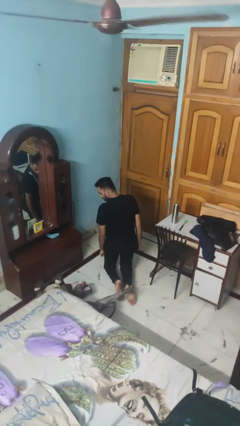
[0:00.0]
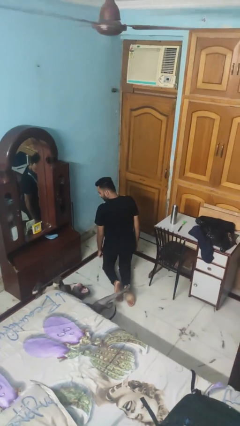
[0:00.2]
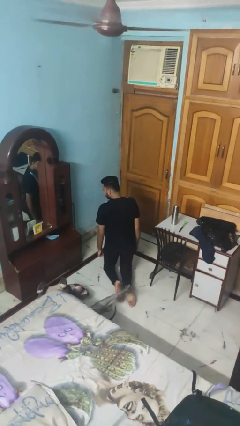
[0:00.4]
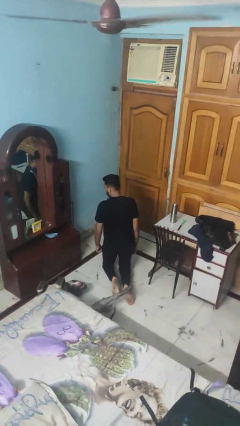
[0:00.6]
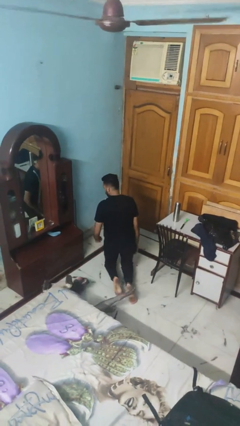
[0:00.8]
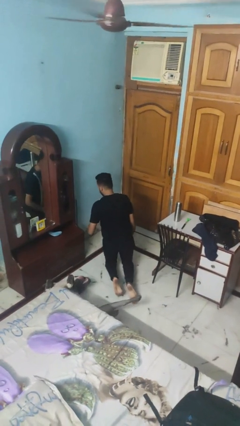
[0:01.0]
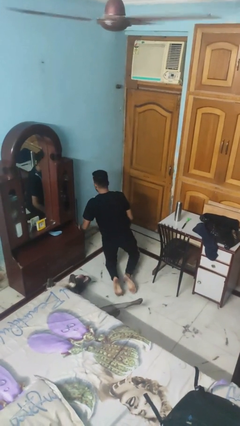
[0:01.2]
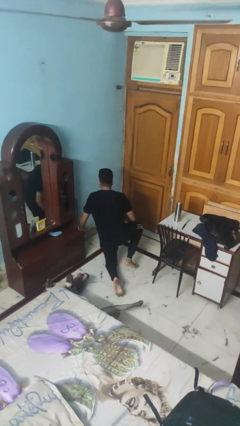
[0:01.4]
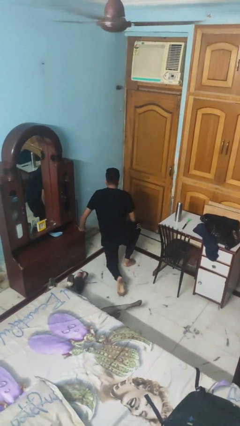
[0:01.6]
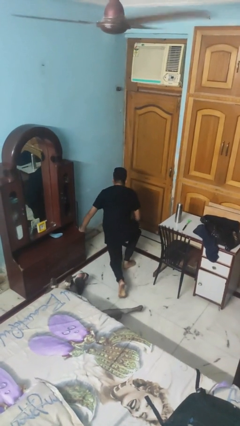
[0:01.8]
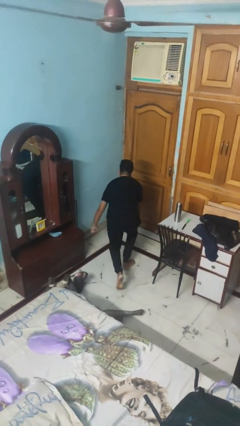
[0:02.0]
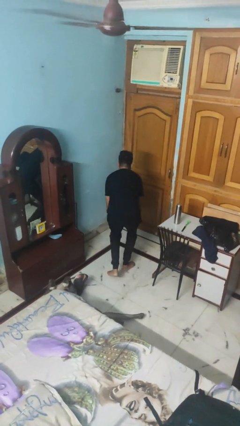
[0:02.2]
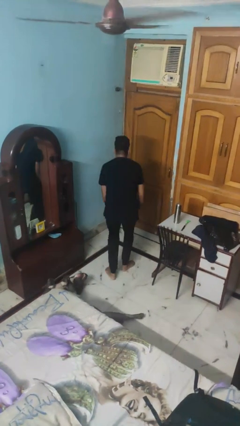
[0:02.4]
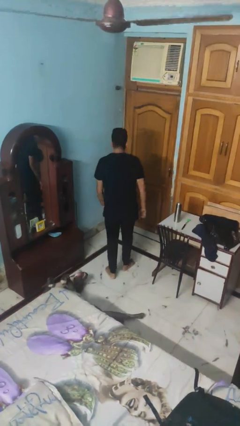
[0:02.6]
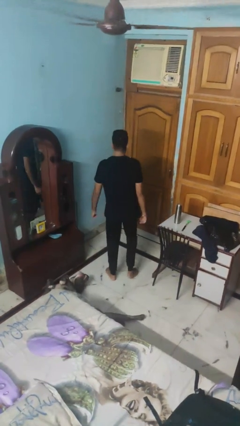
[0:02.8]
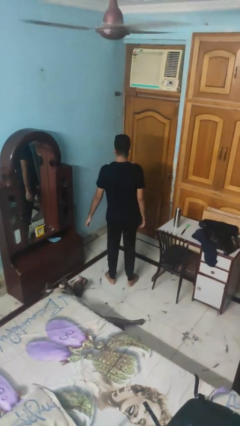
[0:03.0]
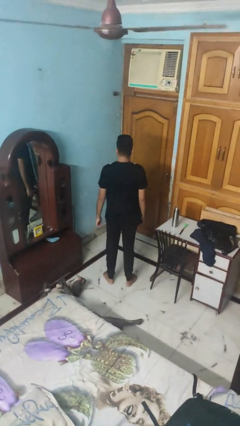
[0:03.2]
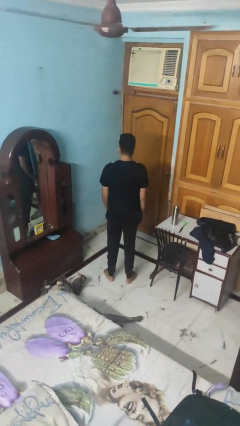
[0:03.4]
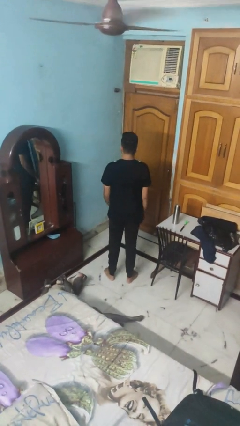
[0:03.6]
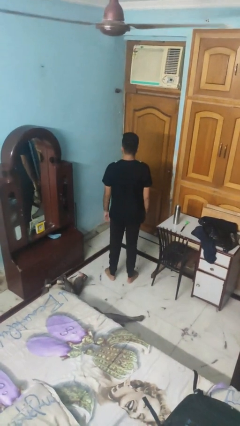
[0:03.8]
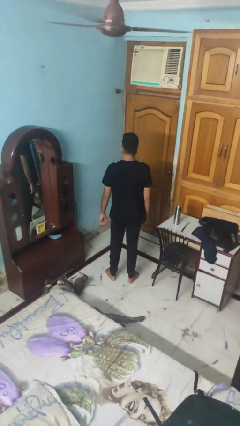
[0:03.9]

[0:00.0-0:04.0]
person stands up from floor

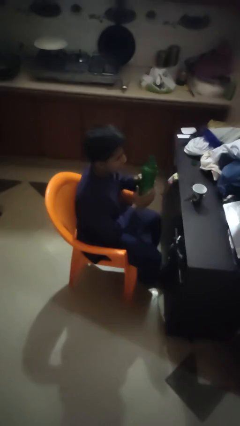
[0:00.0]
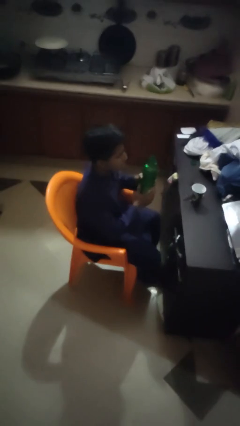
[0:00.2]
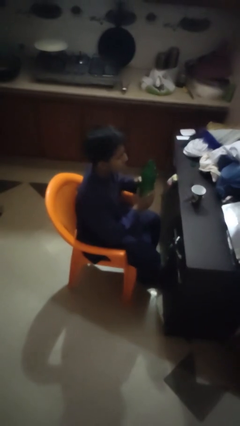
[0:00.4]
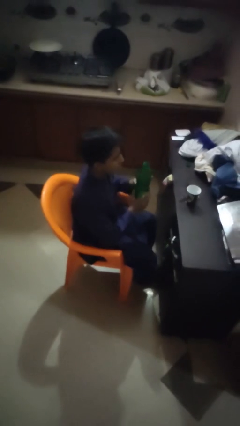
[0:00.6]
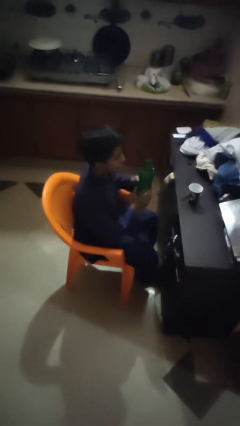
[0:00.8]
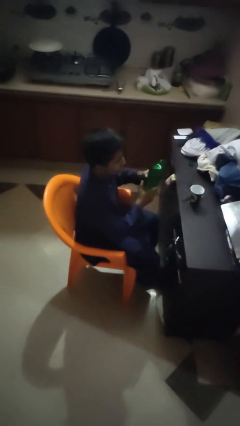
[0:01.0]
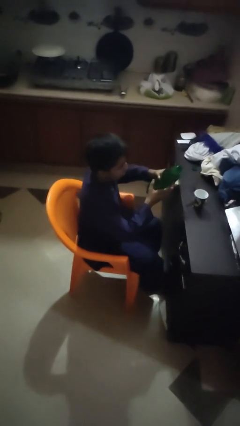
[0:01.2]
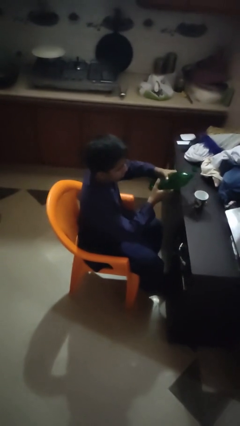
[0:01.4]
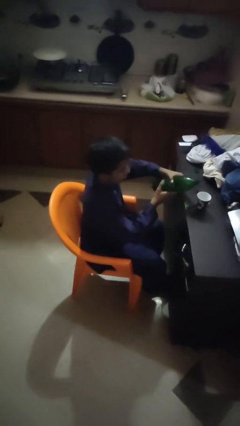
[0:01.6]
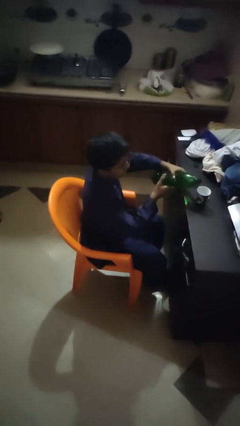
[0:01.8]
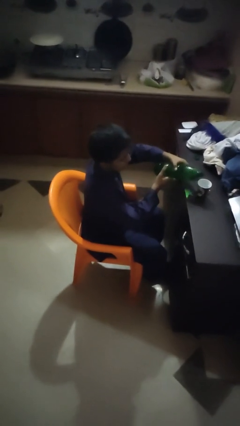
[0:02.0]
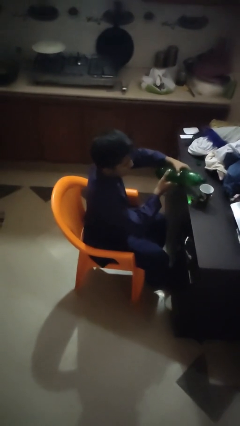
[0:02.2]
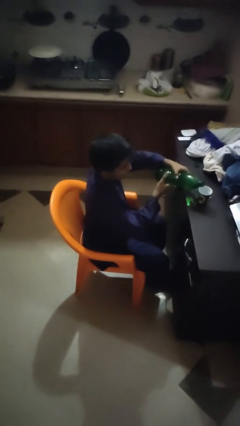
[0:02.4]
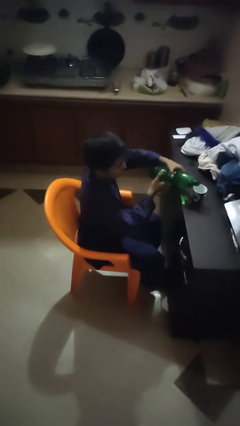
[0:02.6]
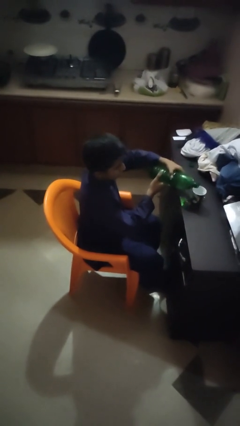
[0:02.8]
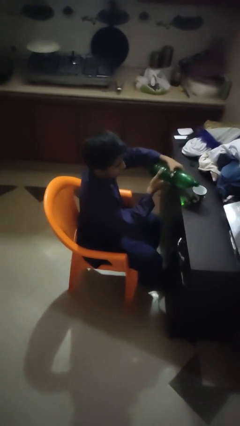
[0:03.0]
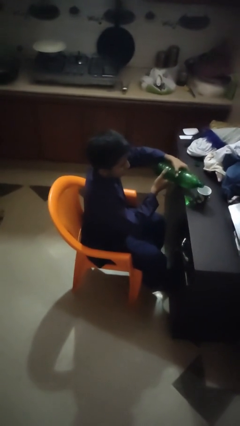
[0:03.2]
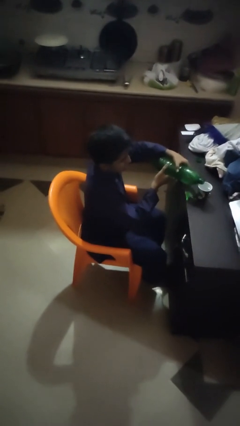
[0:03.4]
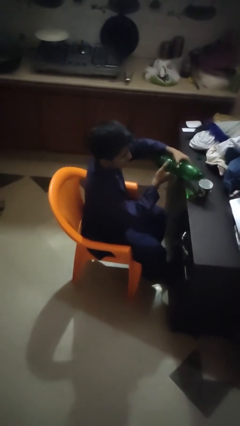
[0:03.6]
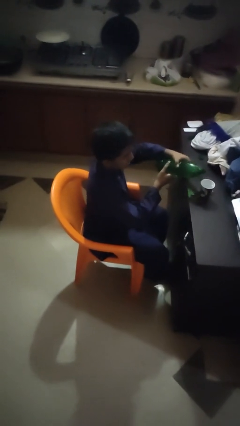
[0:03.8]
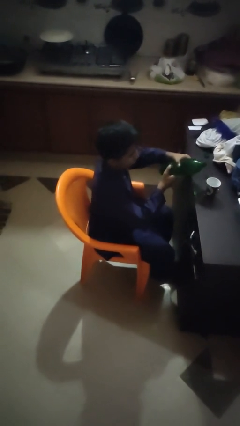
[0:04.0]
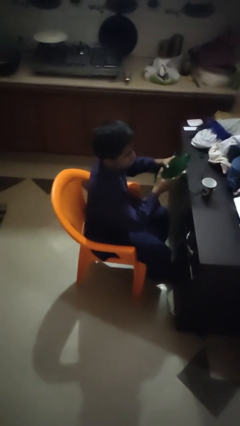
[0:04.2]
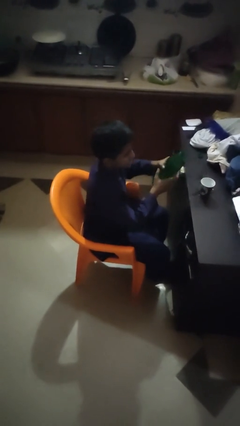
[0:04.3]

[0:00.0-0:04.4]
person pours liquid into cup

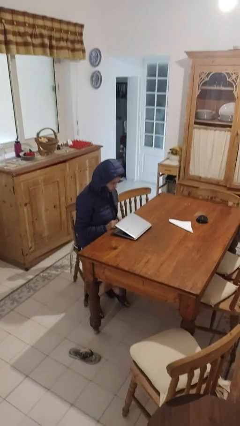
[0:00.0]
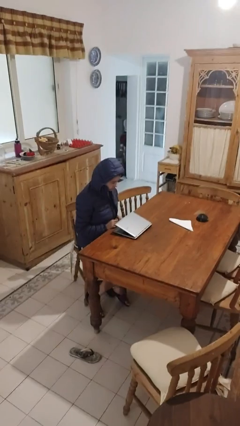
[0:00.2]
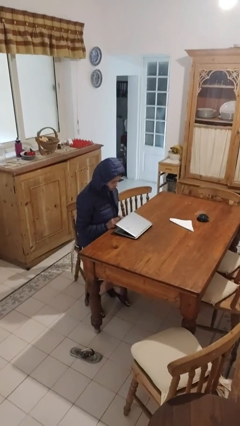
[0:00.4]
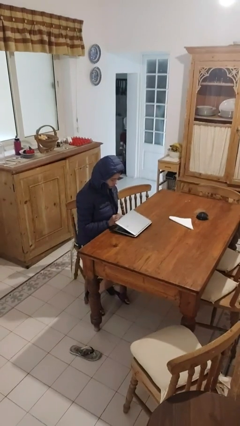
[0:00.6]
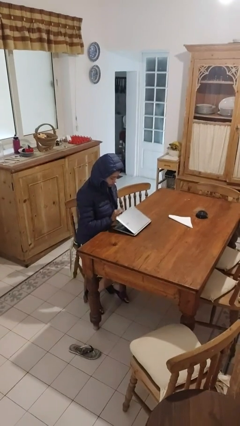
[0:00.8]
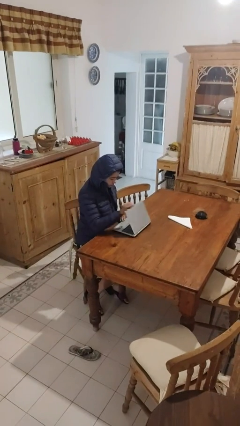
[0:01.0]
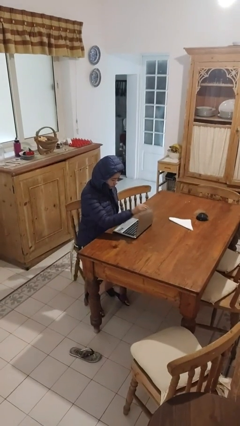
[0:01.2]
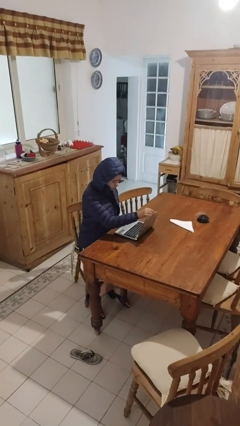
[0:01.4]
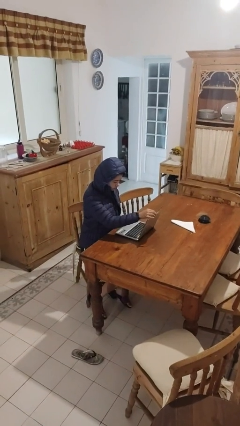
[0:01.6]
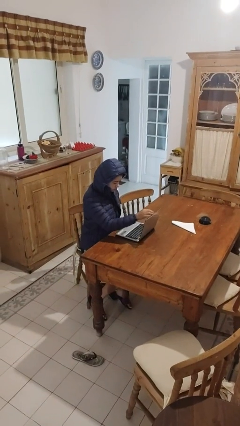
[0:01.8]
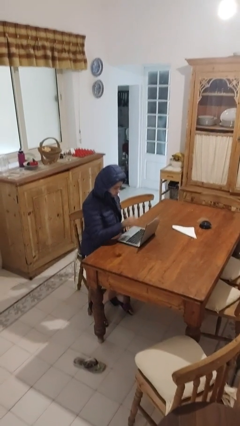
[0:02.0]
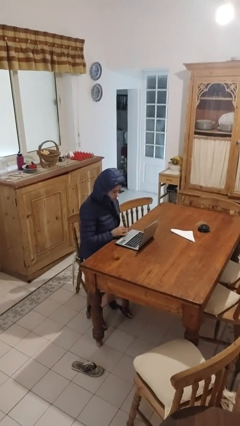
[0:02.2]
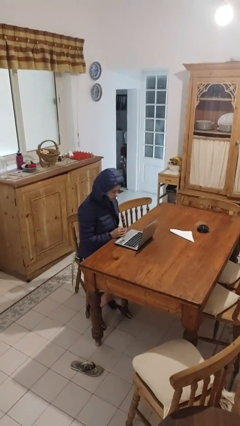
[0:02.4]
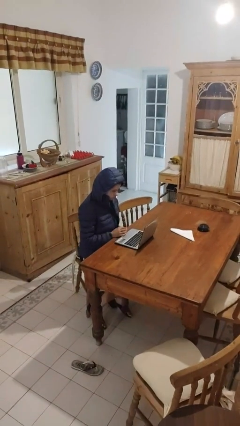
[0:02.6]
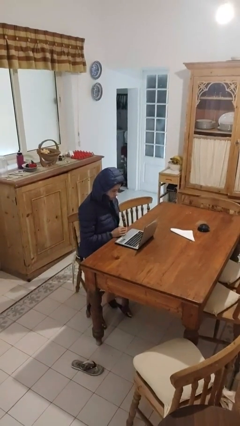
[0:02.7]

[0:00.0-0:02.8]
person opens laptop

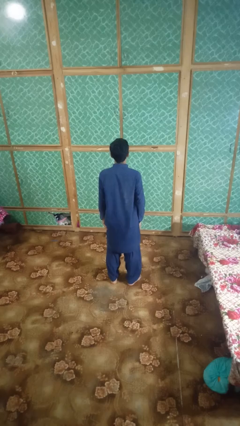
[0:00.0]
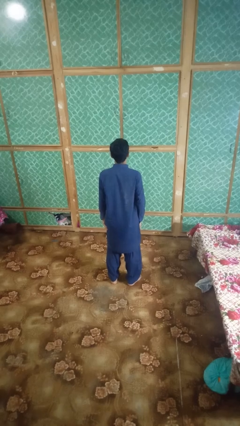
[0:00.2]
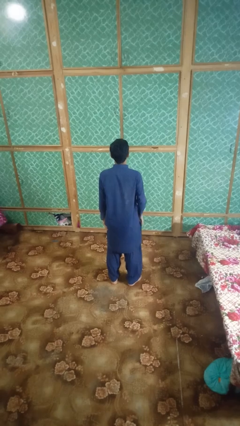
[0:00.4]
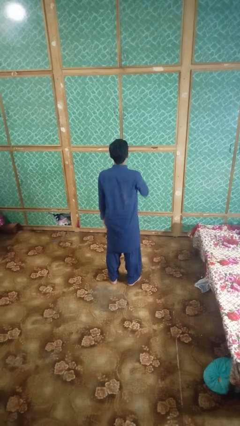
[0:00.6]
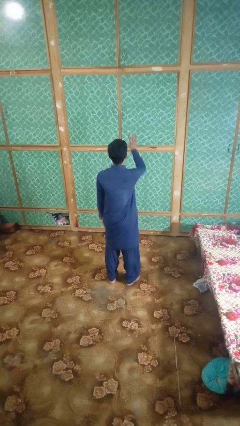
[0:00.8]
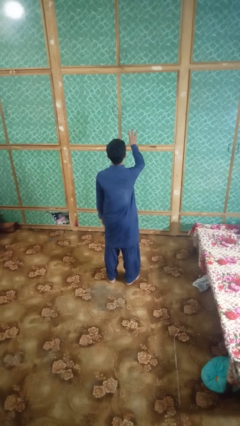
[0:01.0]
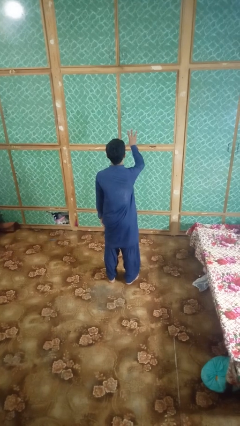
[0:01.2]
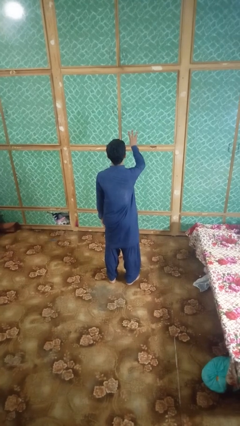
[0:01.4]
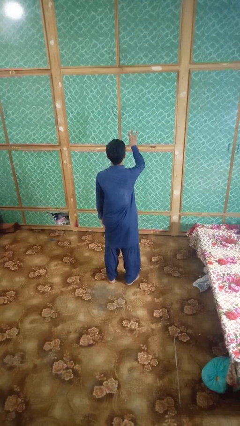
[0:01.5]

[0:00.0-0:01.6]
person gestures number three

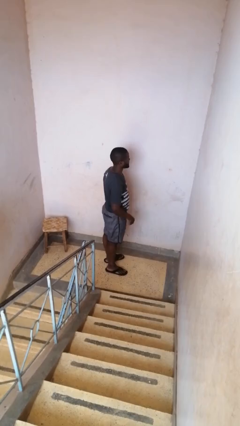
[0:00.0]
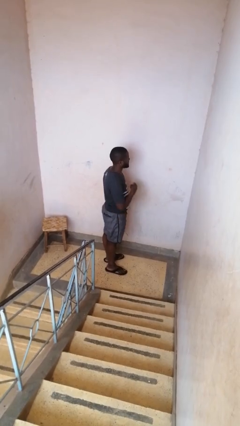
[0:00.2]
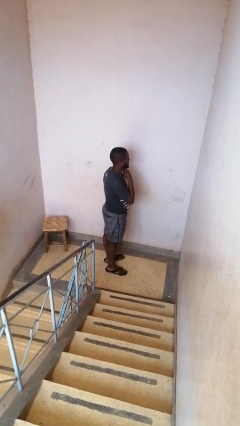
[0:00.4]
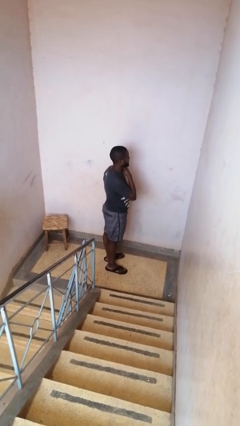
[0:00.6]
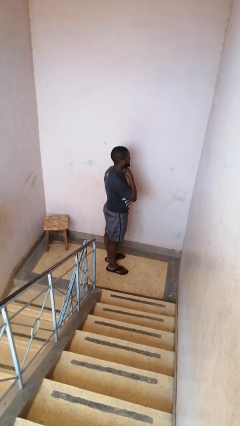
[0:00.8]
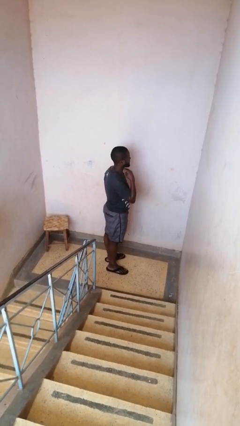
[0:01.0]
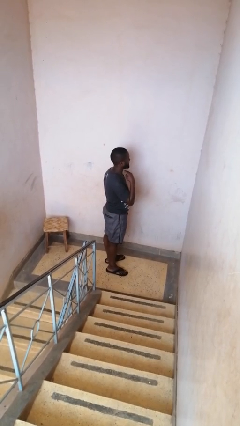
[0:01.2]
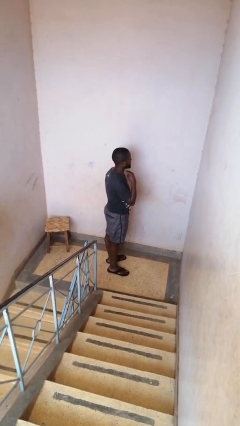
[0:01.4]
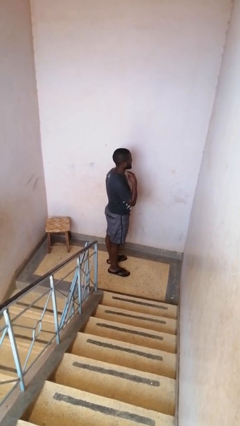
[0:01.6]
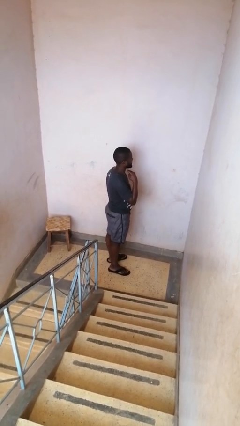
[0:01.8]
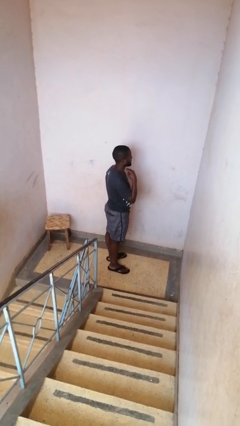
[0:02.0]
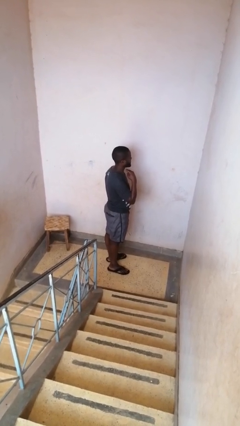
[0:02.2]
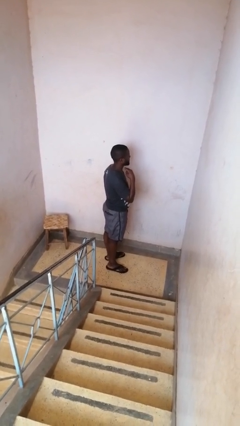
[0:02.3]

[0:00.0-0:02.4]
person gestures cut

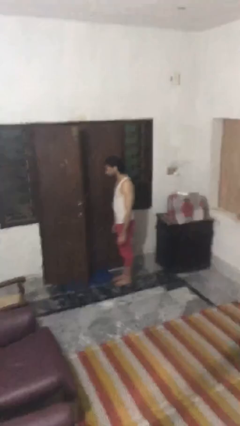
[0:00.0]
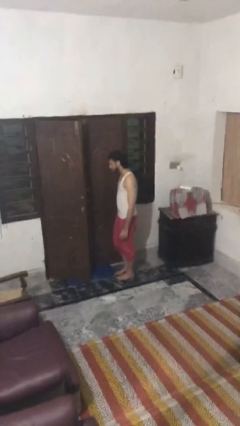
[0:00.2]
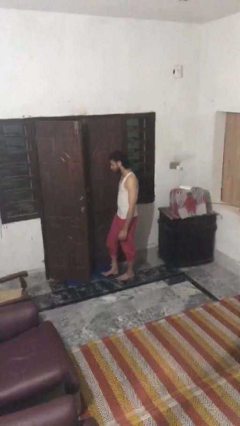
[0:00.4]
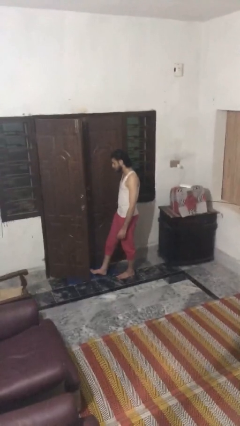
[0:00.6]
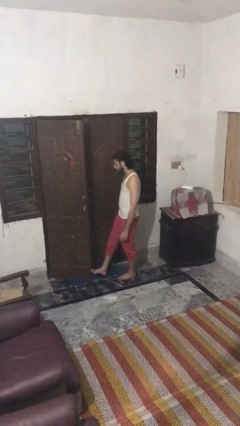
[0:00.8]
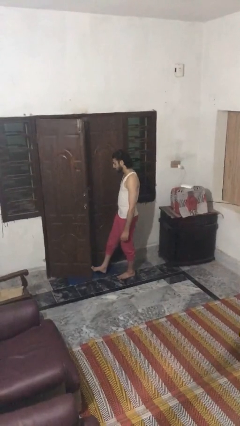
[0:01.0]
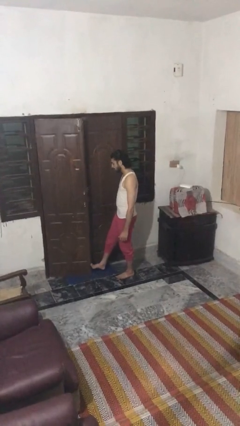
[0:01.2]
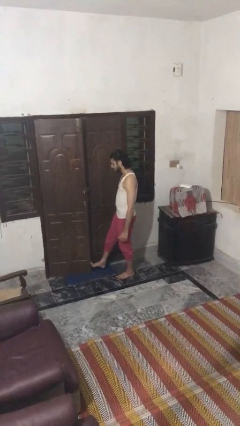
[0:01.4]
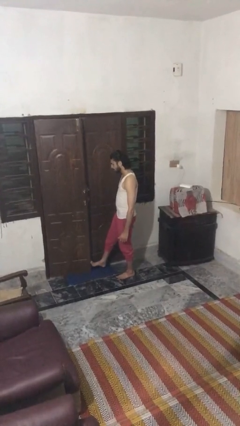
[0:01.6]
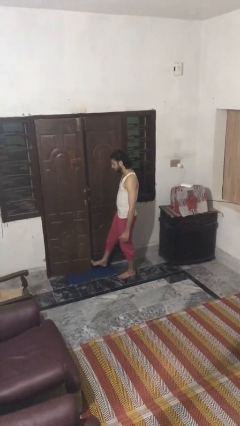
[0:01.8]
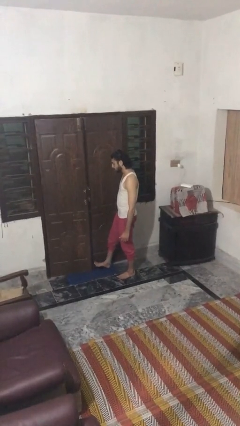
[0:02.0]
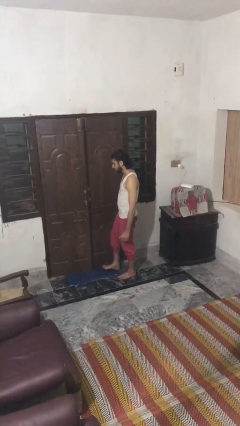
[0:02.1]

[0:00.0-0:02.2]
person closes door with foot

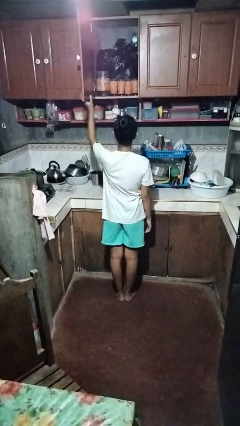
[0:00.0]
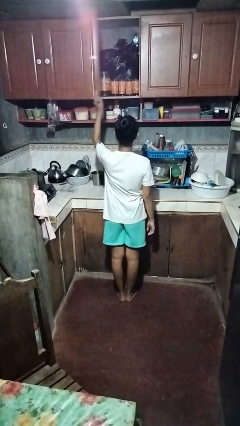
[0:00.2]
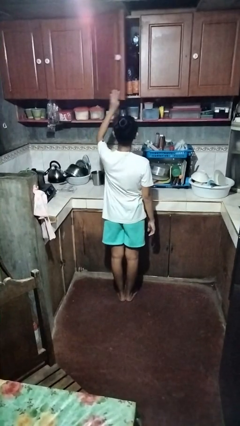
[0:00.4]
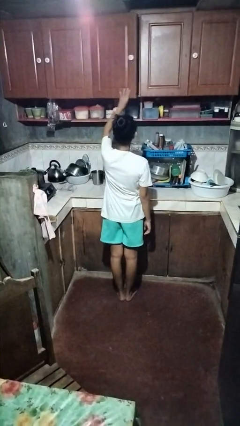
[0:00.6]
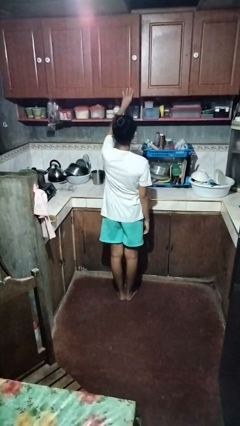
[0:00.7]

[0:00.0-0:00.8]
person closes cabinet
